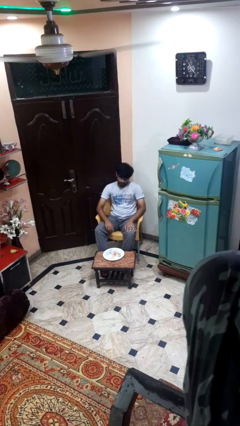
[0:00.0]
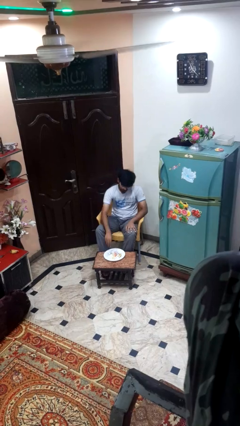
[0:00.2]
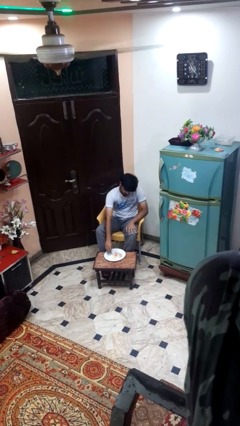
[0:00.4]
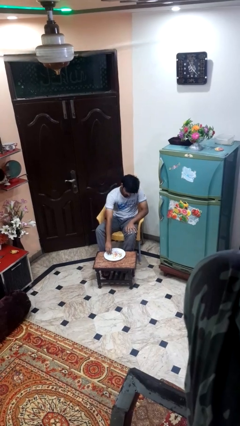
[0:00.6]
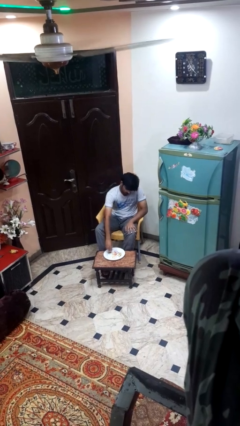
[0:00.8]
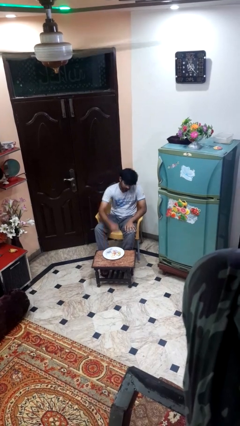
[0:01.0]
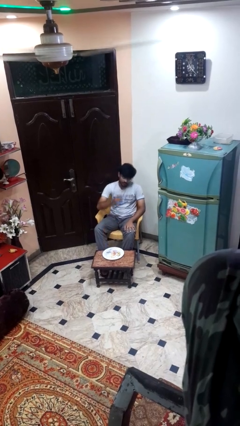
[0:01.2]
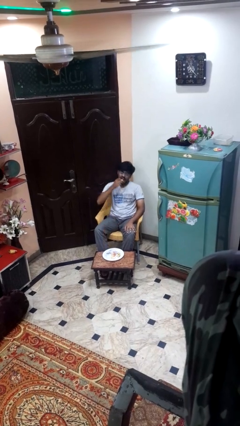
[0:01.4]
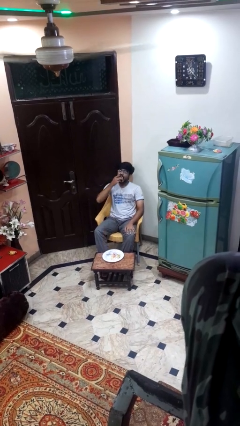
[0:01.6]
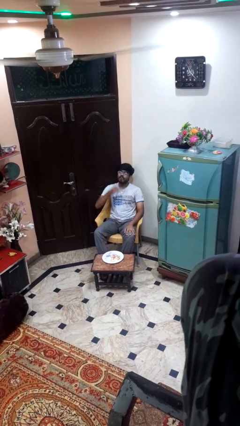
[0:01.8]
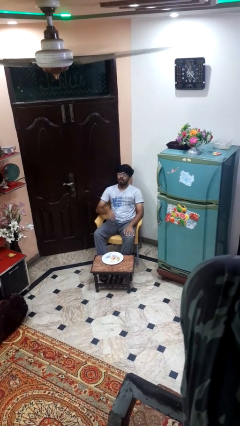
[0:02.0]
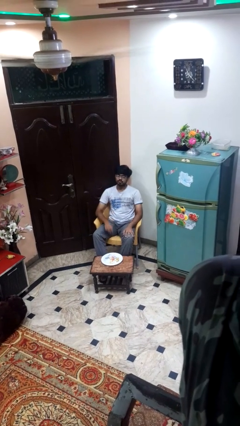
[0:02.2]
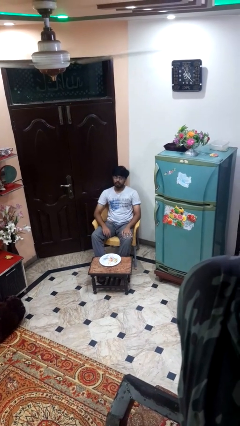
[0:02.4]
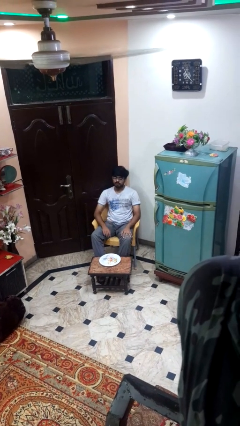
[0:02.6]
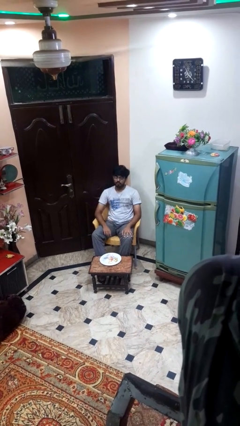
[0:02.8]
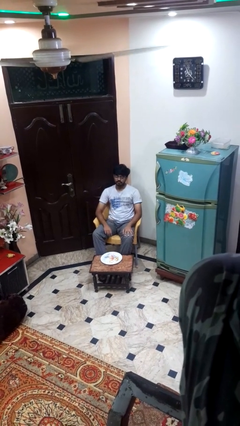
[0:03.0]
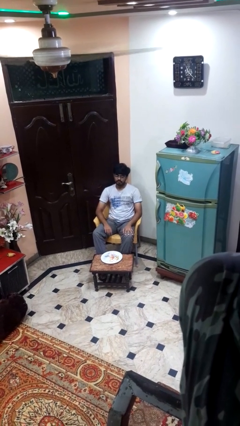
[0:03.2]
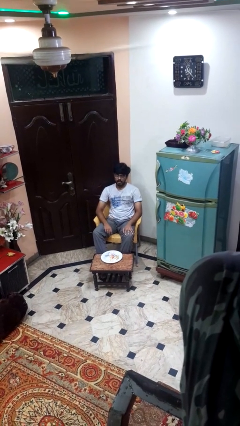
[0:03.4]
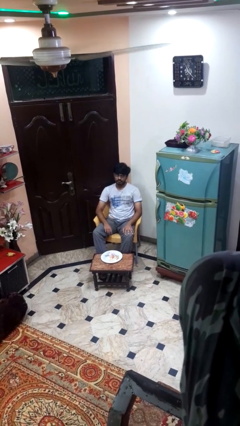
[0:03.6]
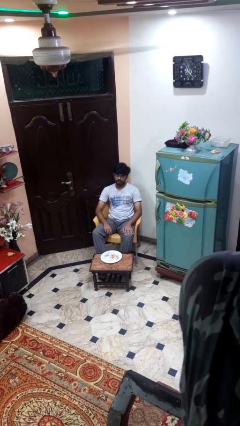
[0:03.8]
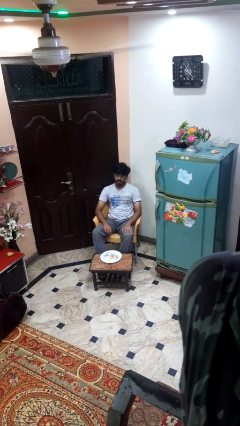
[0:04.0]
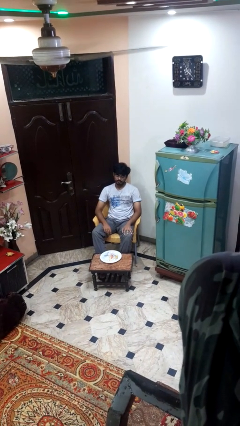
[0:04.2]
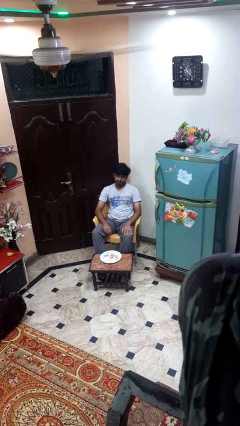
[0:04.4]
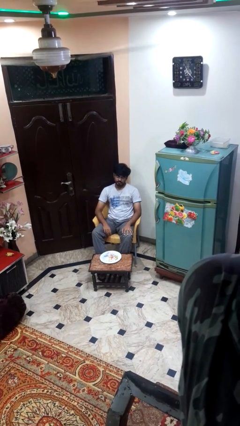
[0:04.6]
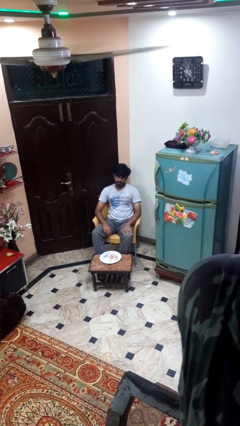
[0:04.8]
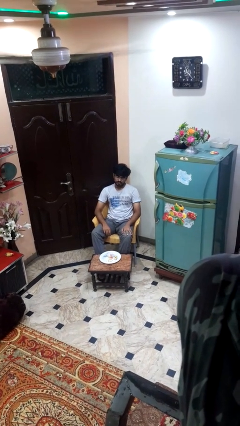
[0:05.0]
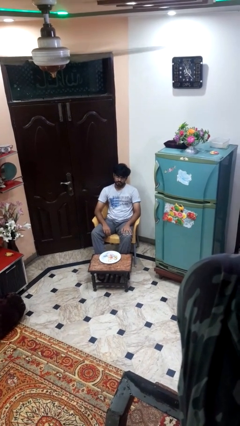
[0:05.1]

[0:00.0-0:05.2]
person eats with hands

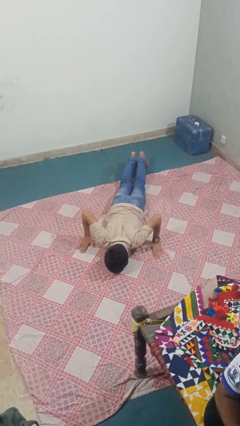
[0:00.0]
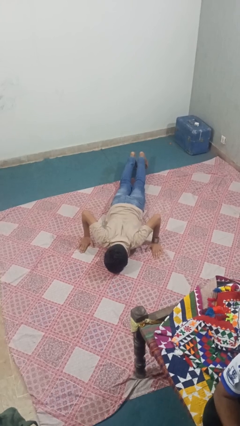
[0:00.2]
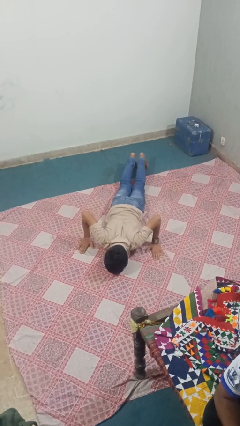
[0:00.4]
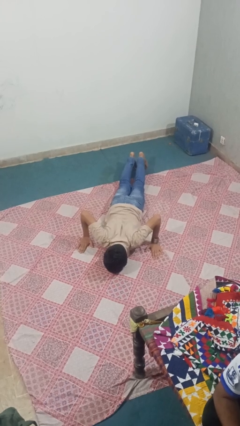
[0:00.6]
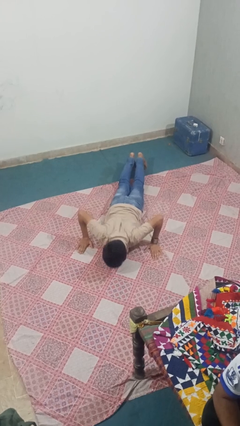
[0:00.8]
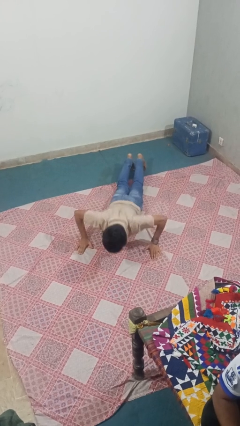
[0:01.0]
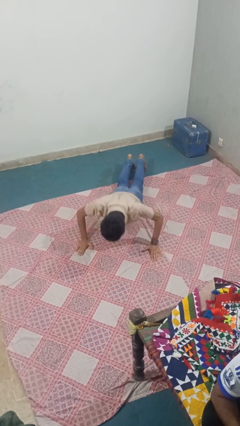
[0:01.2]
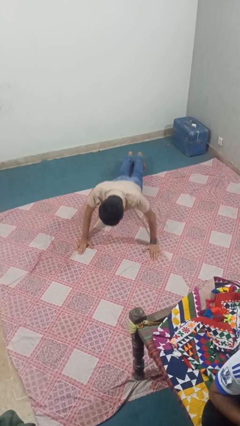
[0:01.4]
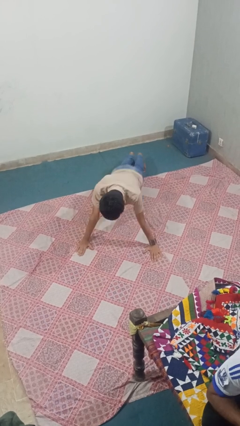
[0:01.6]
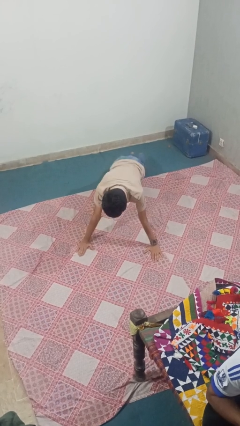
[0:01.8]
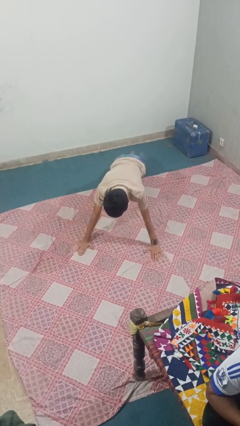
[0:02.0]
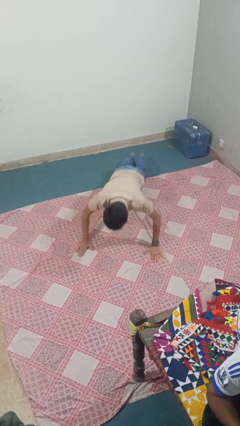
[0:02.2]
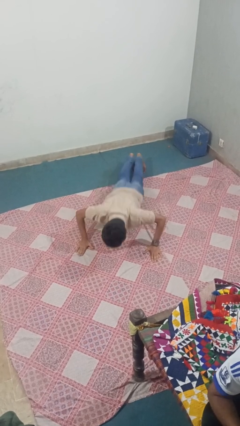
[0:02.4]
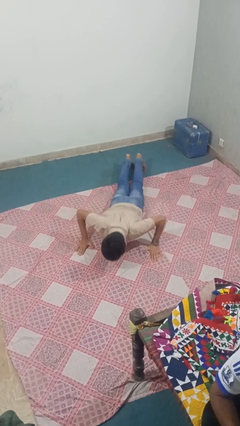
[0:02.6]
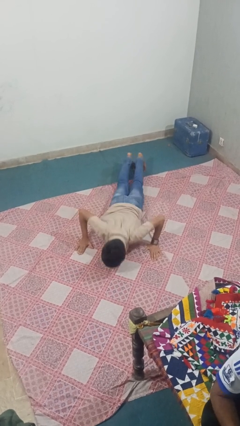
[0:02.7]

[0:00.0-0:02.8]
person exercises with pushup

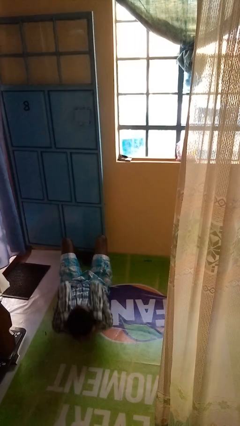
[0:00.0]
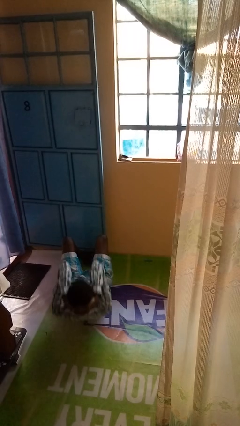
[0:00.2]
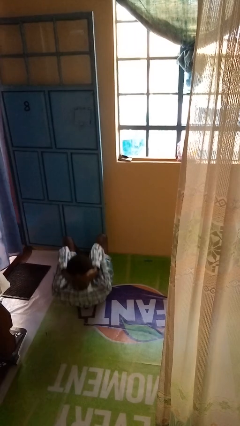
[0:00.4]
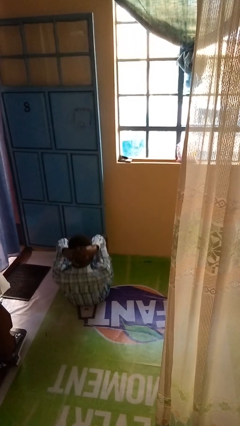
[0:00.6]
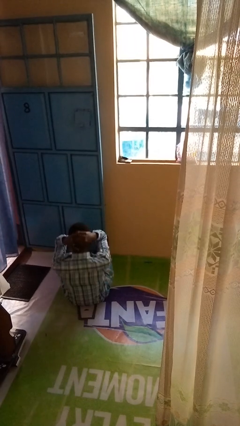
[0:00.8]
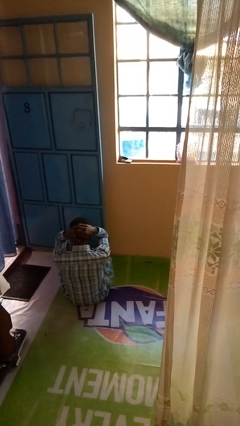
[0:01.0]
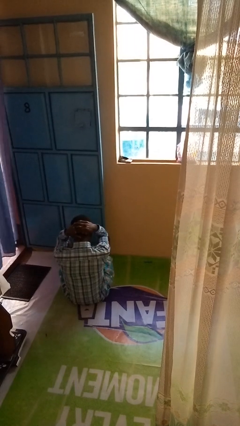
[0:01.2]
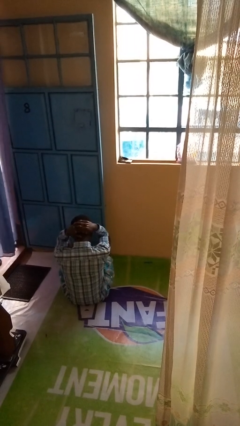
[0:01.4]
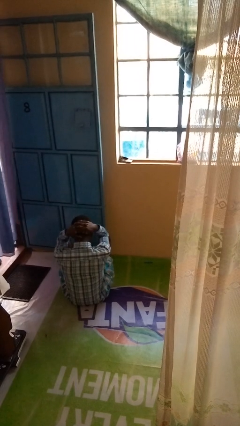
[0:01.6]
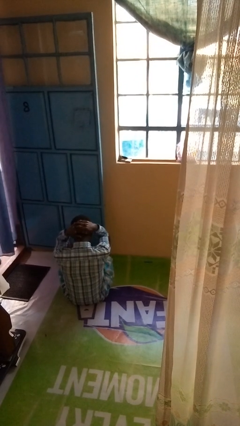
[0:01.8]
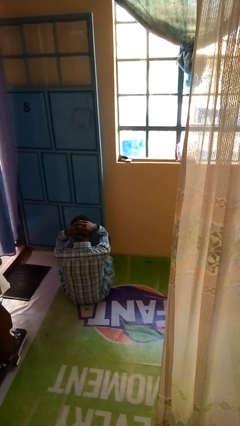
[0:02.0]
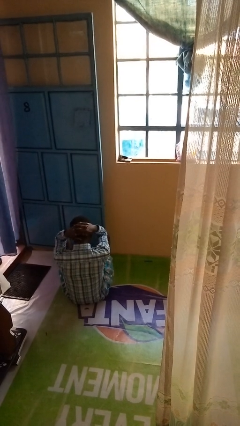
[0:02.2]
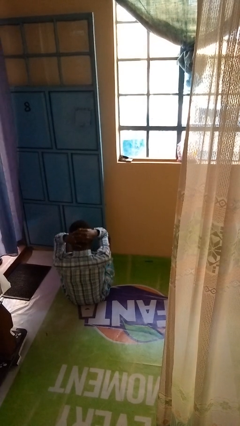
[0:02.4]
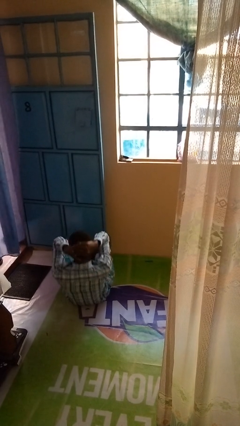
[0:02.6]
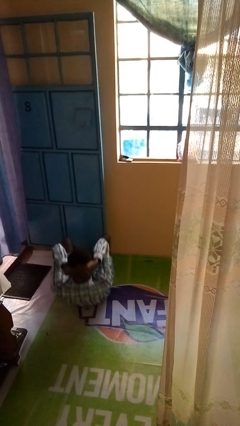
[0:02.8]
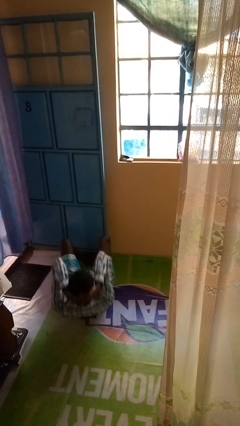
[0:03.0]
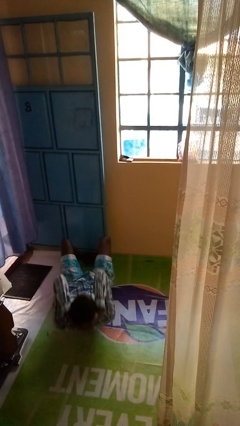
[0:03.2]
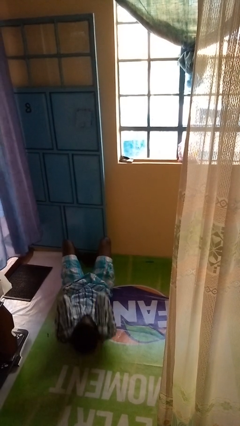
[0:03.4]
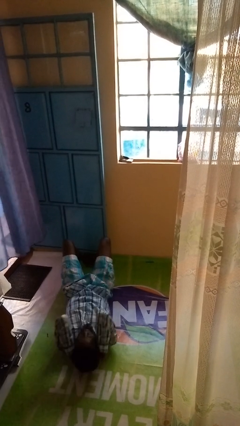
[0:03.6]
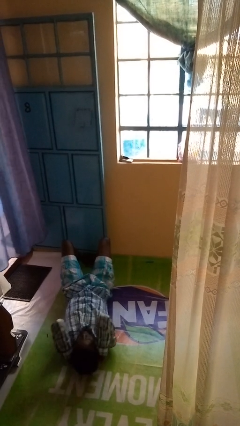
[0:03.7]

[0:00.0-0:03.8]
person exercises with situp

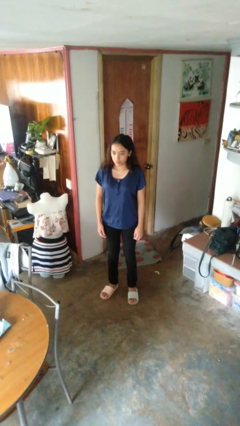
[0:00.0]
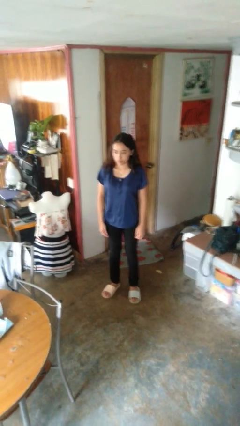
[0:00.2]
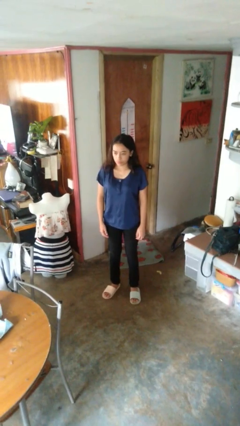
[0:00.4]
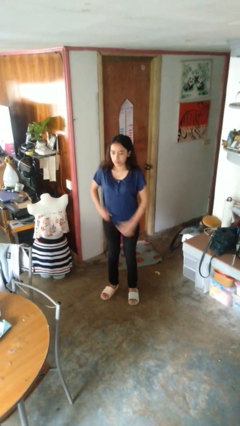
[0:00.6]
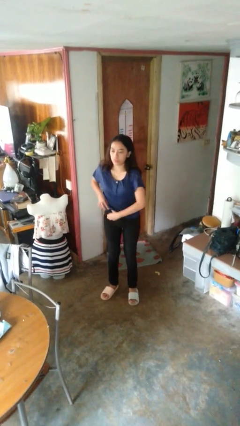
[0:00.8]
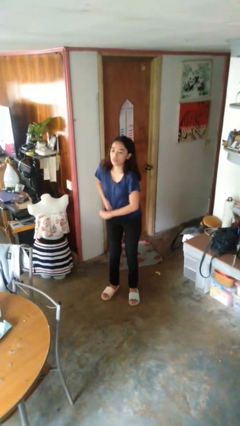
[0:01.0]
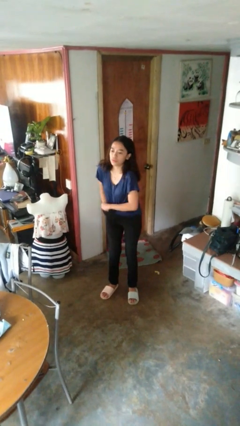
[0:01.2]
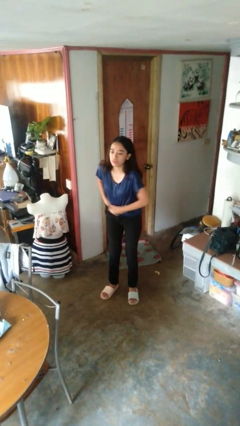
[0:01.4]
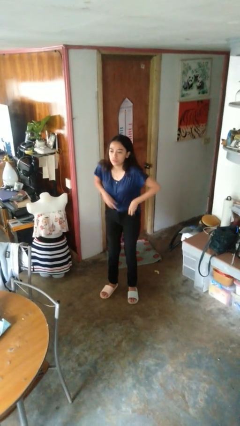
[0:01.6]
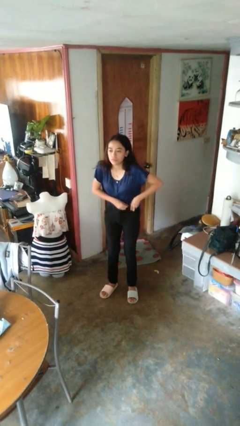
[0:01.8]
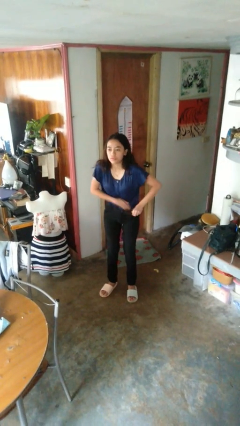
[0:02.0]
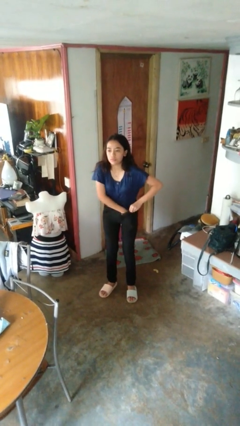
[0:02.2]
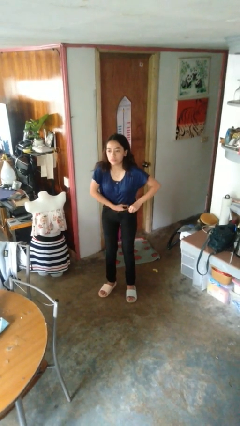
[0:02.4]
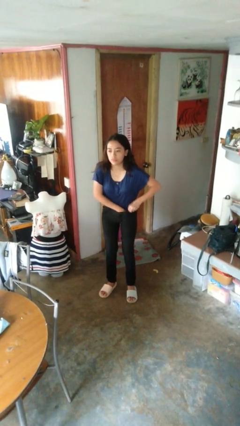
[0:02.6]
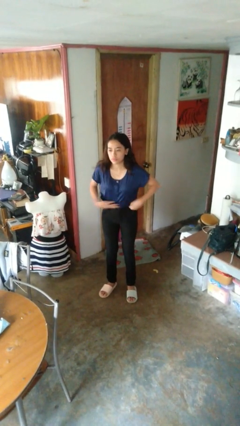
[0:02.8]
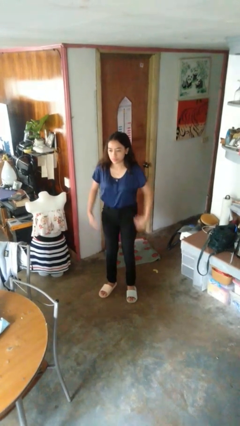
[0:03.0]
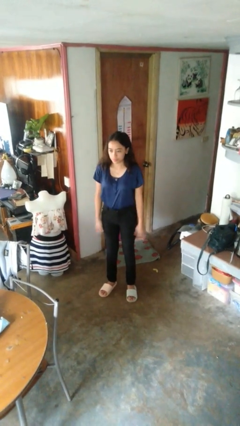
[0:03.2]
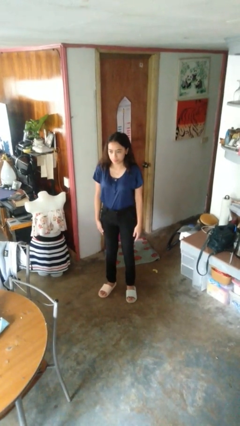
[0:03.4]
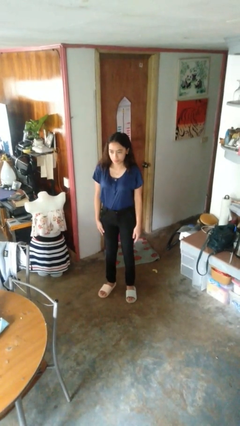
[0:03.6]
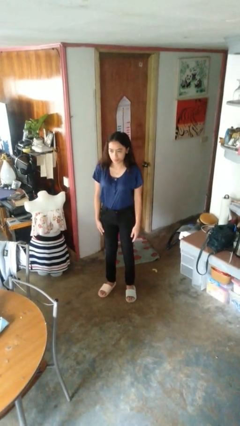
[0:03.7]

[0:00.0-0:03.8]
person tucks in shirt

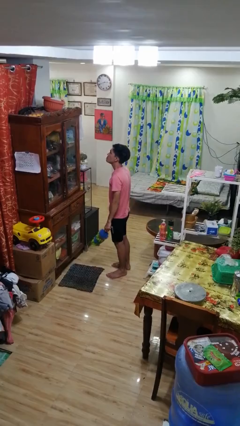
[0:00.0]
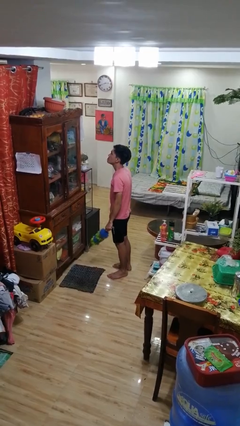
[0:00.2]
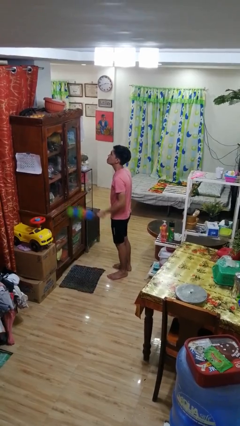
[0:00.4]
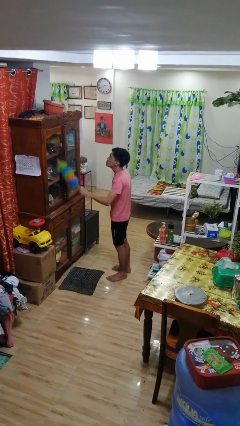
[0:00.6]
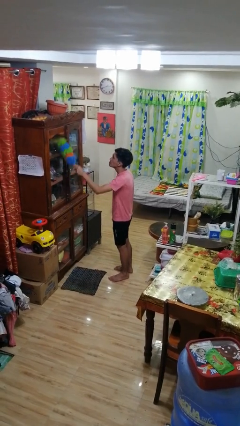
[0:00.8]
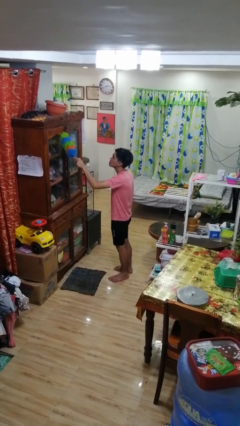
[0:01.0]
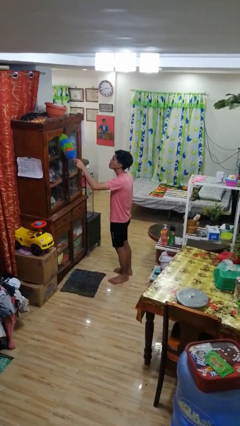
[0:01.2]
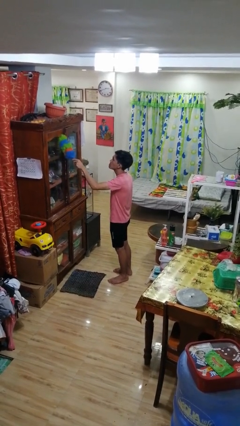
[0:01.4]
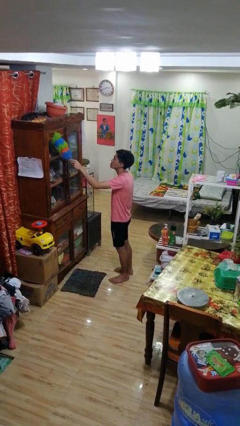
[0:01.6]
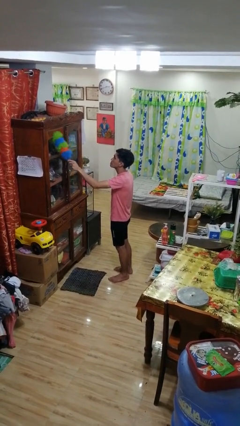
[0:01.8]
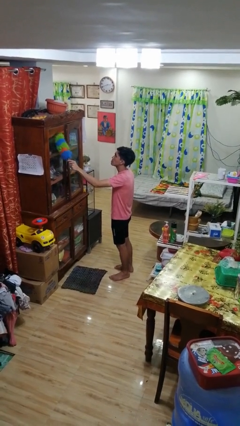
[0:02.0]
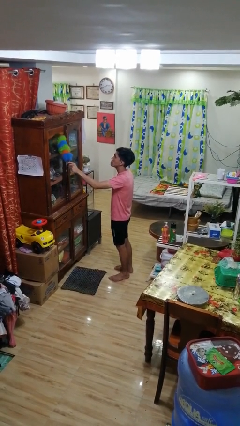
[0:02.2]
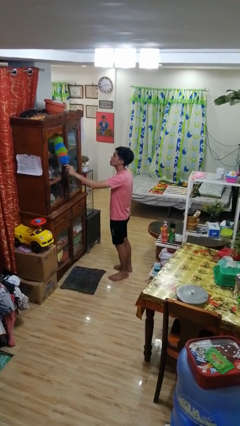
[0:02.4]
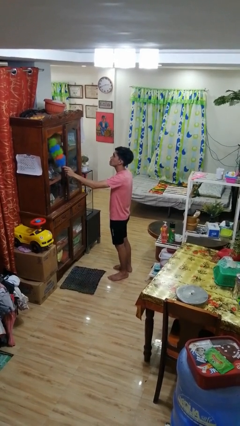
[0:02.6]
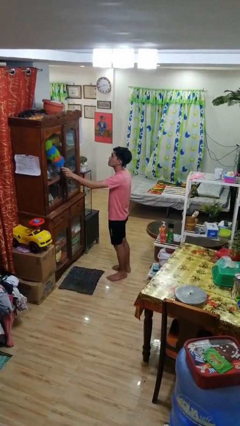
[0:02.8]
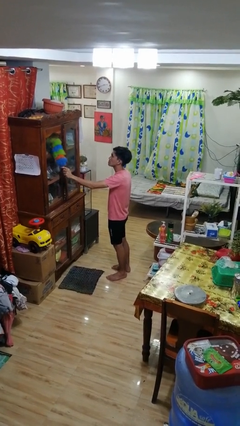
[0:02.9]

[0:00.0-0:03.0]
person dusts furniture
